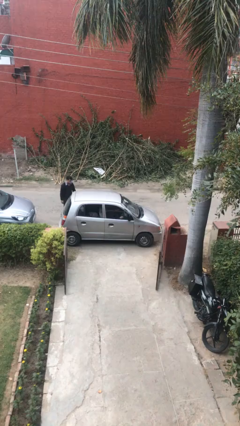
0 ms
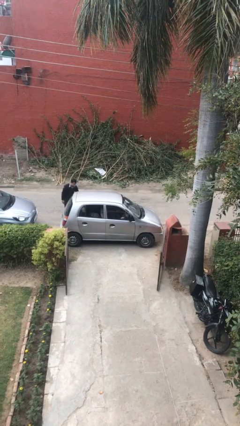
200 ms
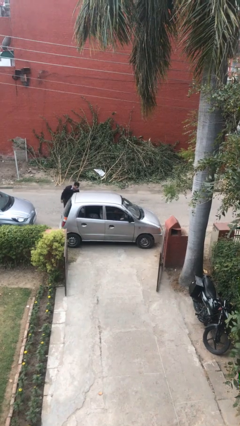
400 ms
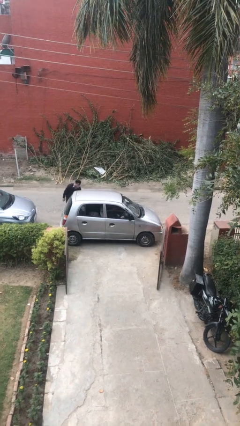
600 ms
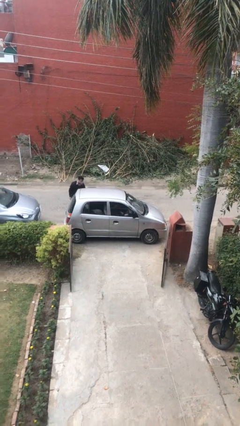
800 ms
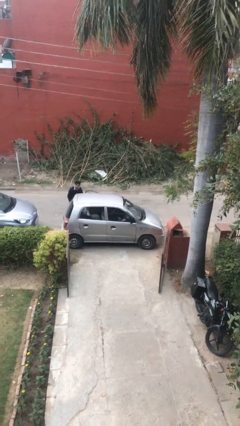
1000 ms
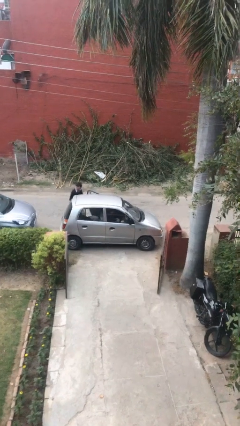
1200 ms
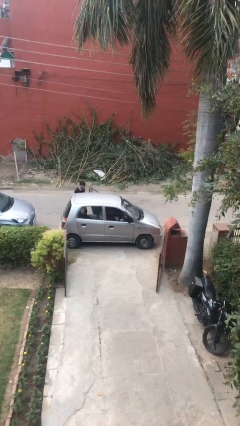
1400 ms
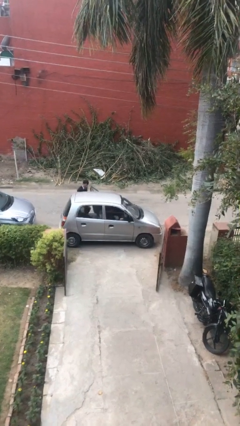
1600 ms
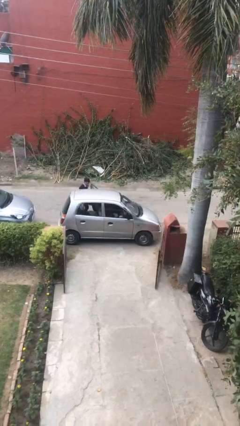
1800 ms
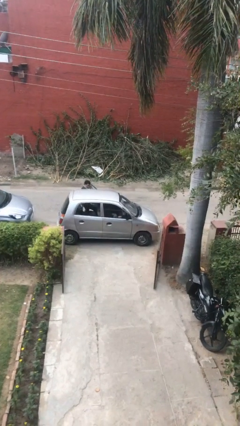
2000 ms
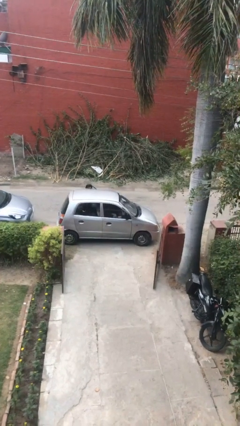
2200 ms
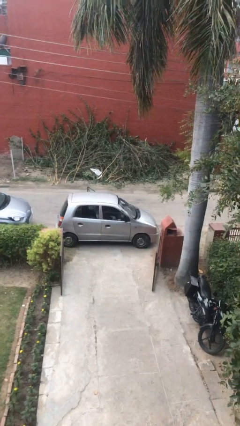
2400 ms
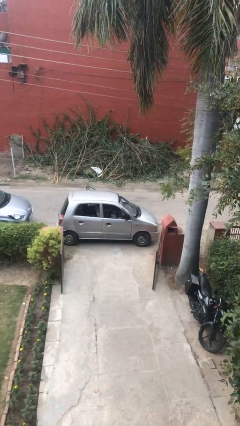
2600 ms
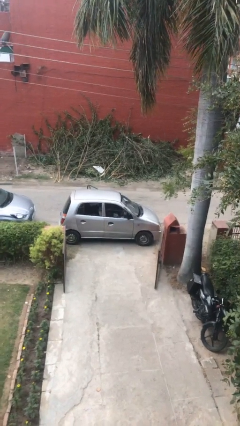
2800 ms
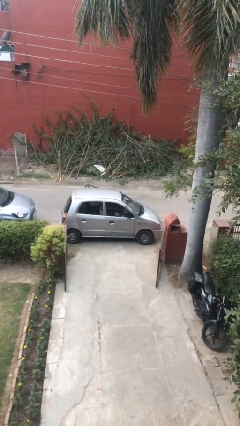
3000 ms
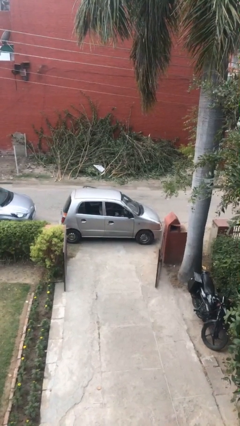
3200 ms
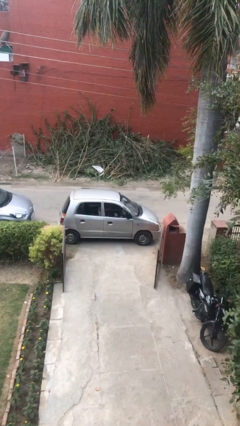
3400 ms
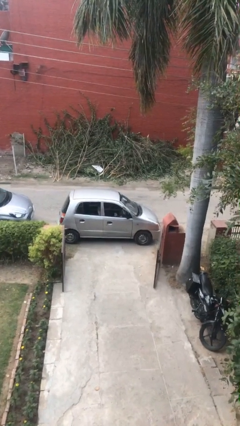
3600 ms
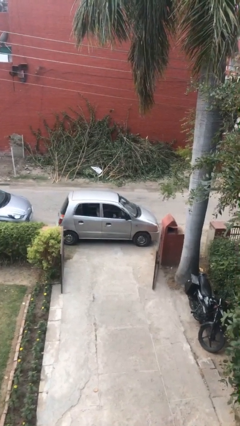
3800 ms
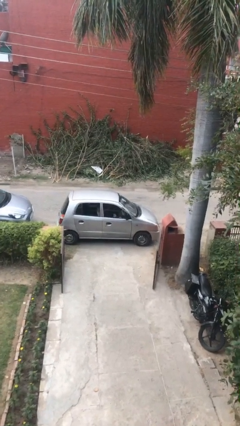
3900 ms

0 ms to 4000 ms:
car picks up person

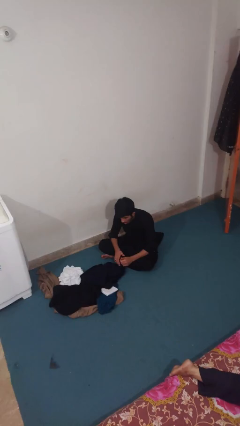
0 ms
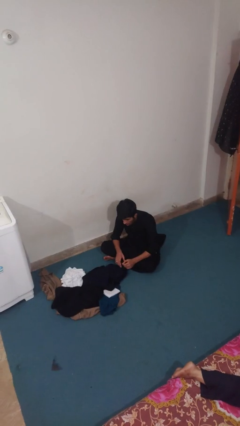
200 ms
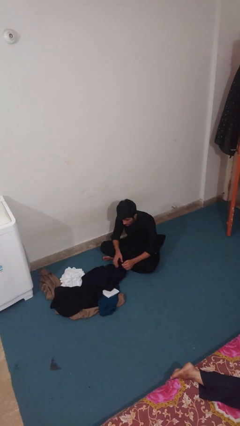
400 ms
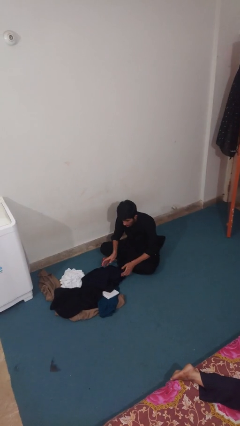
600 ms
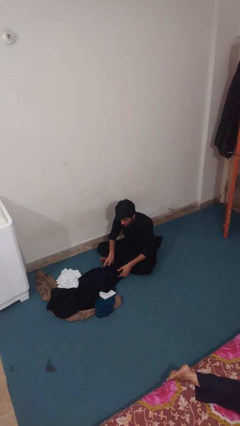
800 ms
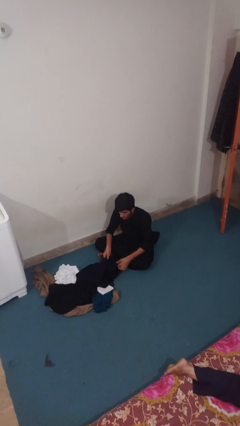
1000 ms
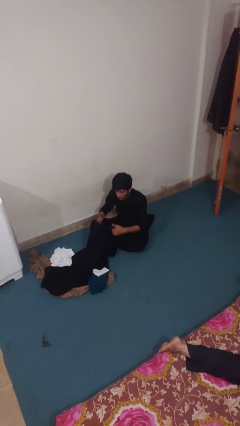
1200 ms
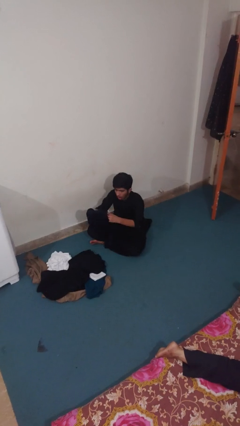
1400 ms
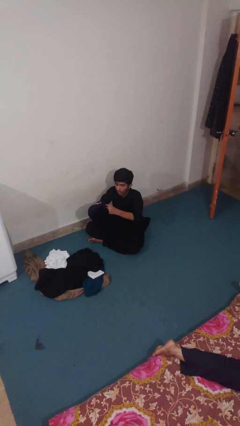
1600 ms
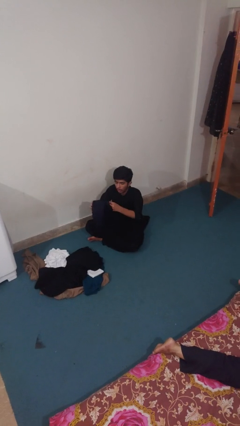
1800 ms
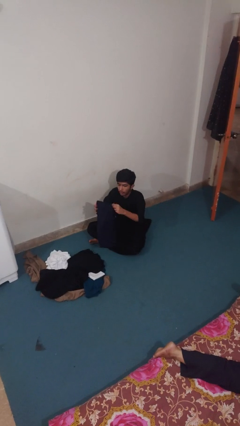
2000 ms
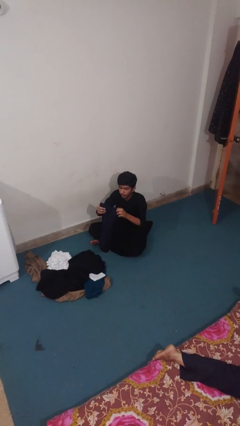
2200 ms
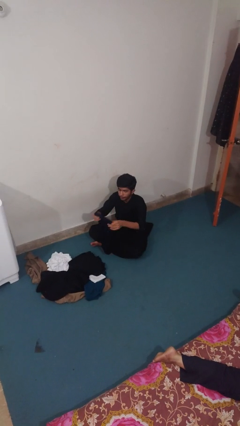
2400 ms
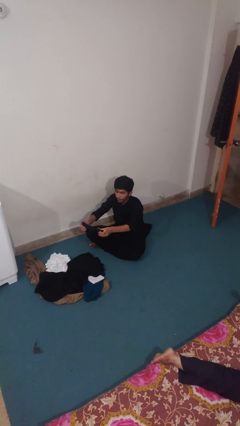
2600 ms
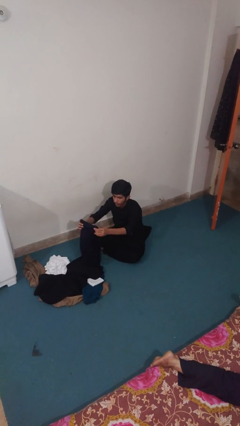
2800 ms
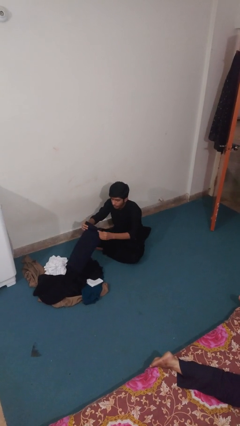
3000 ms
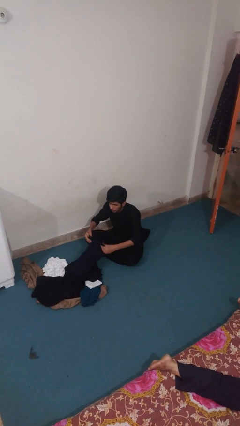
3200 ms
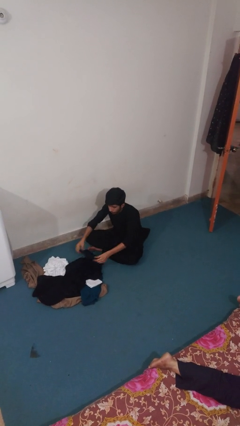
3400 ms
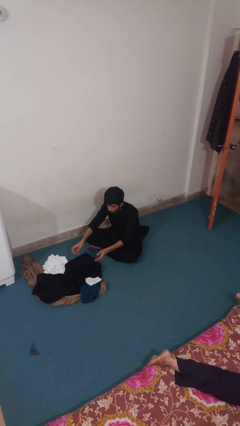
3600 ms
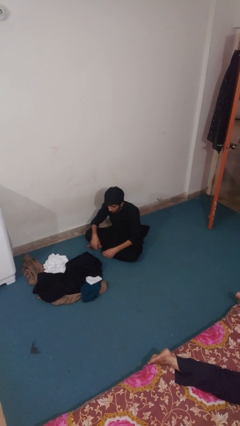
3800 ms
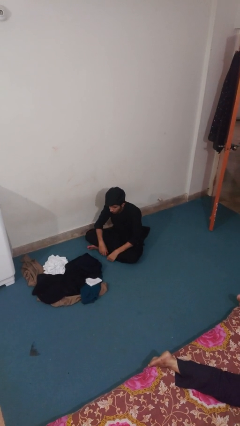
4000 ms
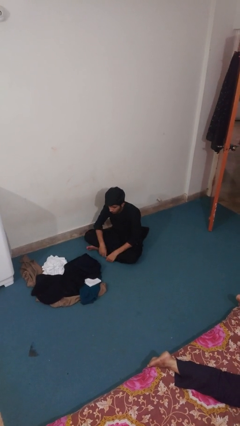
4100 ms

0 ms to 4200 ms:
person folds pants

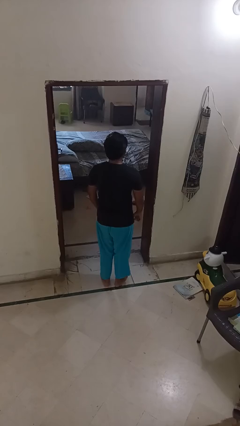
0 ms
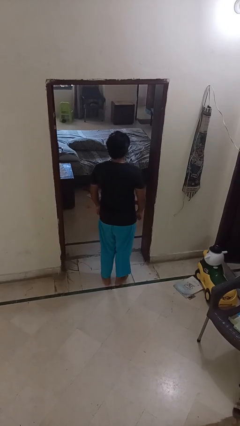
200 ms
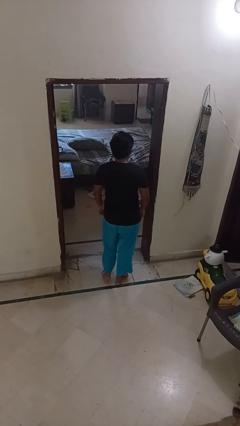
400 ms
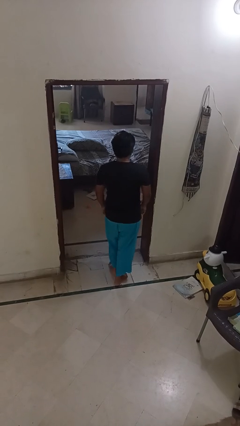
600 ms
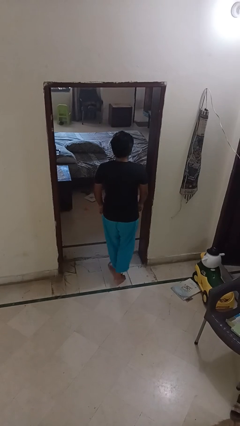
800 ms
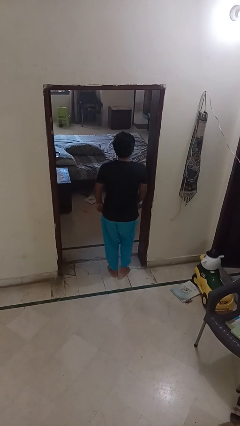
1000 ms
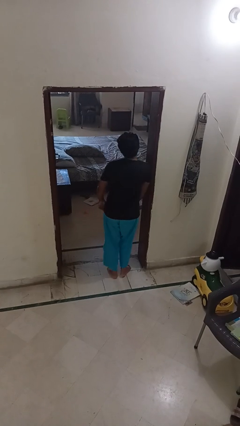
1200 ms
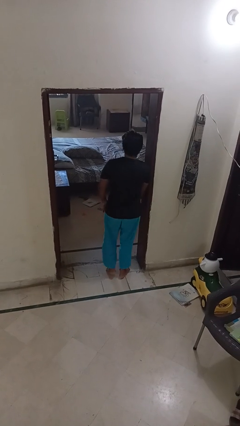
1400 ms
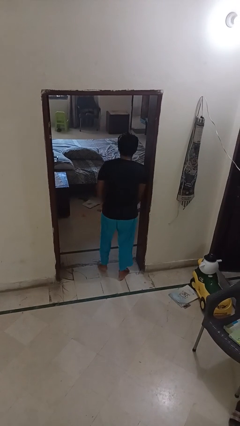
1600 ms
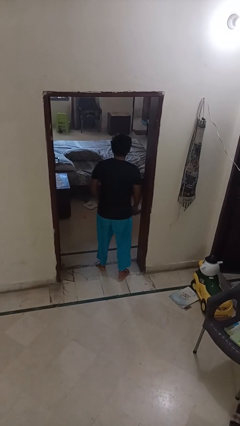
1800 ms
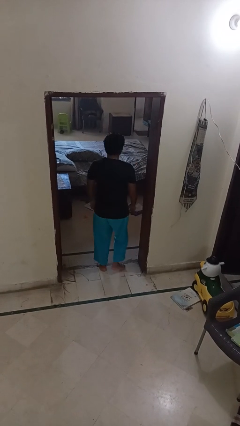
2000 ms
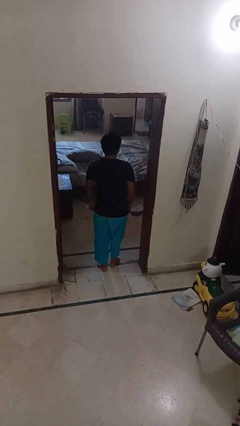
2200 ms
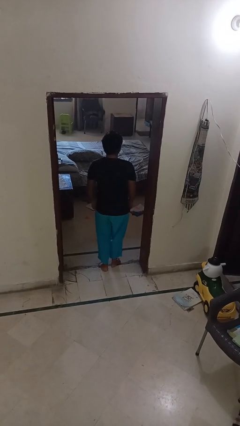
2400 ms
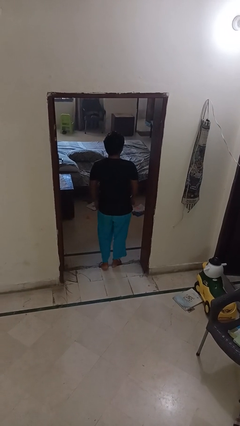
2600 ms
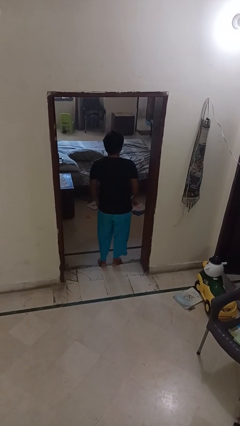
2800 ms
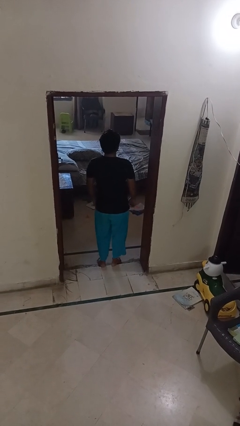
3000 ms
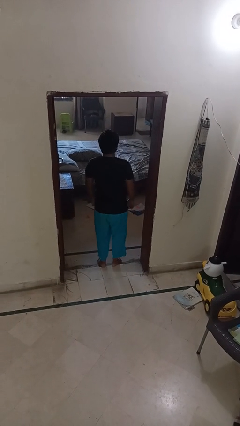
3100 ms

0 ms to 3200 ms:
person bumps into wall

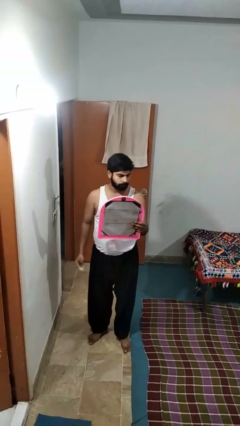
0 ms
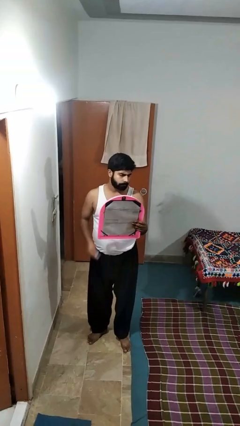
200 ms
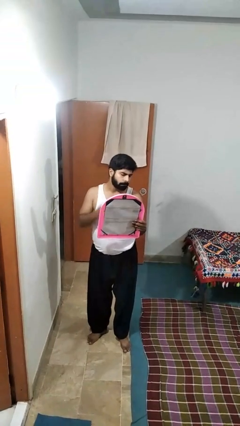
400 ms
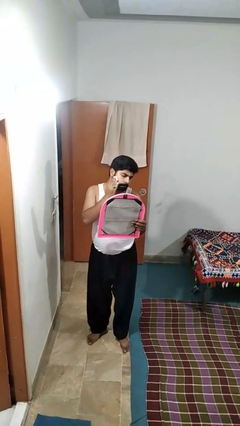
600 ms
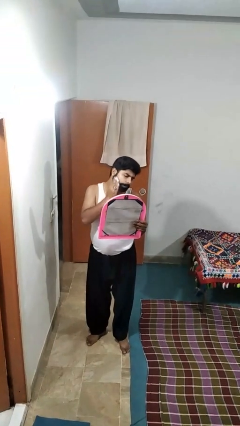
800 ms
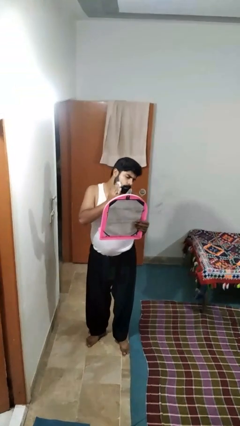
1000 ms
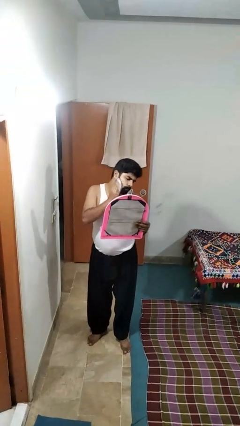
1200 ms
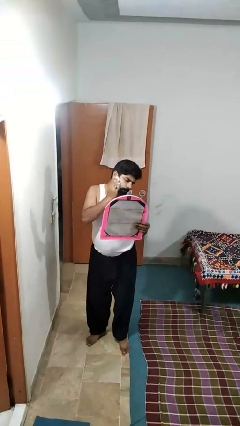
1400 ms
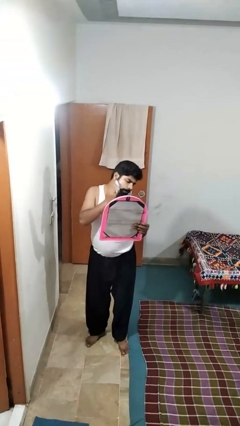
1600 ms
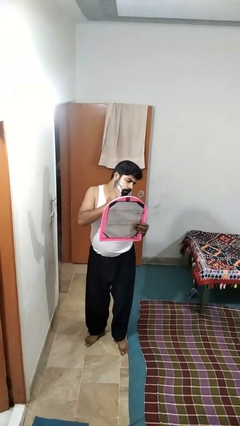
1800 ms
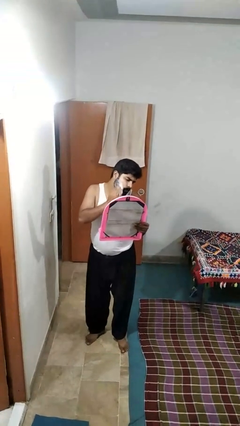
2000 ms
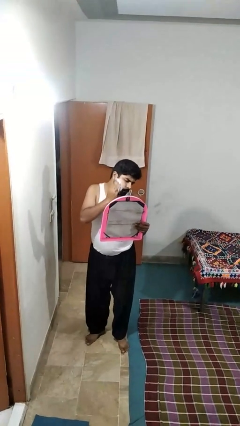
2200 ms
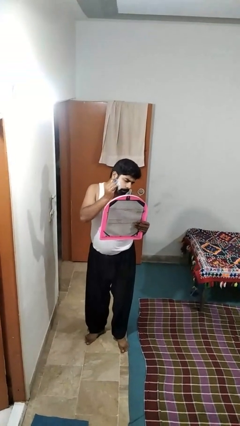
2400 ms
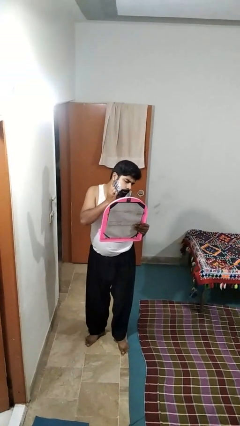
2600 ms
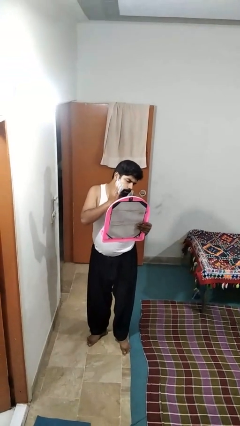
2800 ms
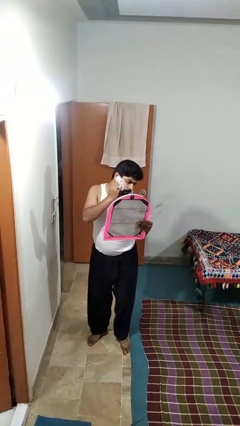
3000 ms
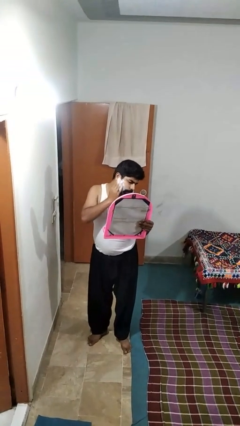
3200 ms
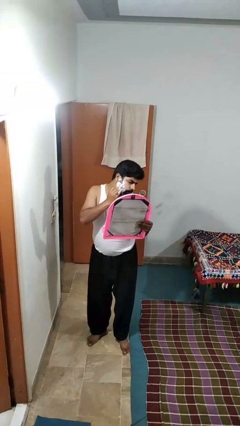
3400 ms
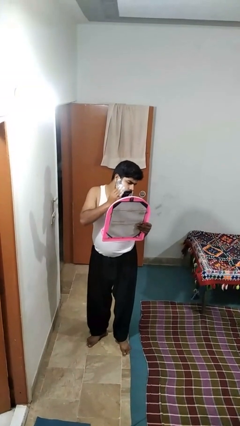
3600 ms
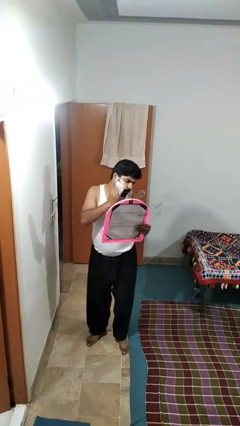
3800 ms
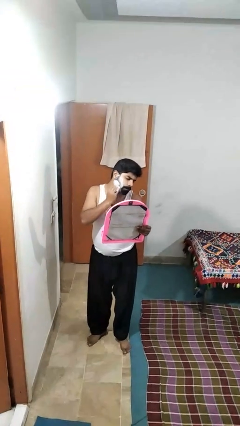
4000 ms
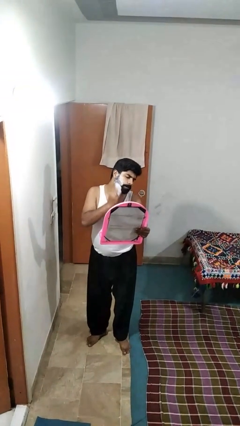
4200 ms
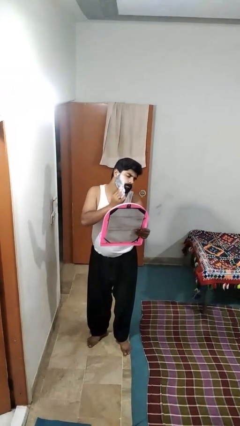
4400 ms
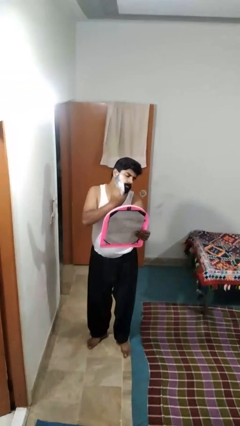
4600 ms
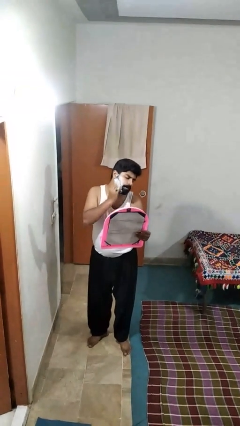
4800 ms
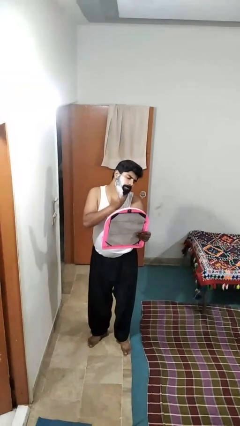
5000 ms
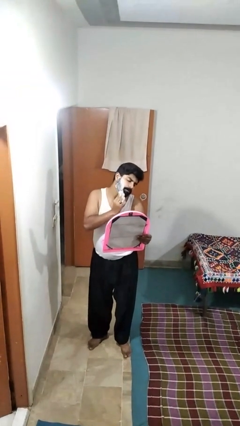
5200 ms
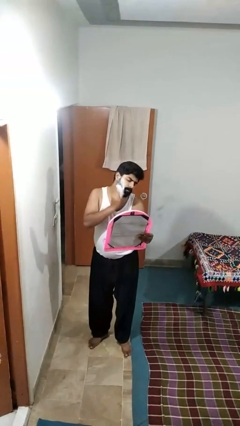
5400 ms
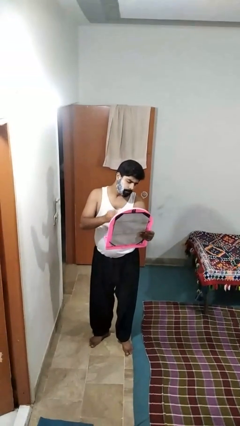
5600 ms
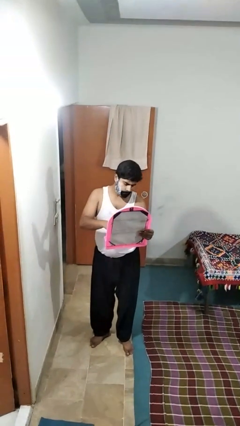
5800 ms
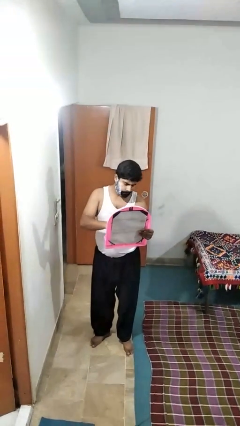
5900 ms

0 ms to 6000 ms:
person applies shaving cream

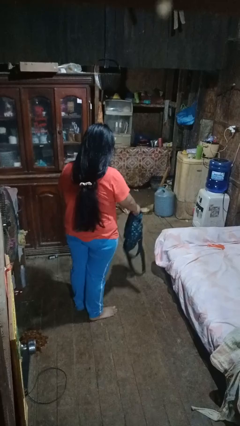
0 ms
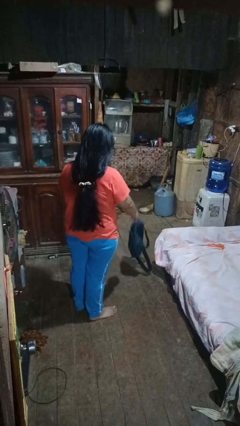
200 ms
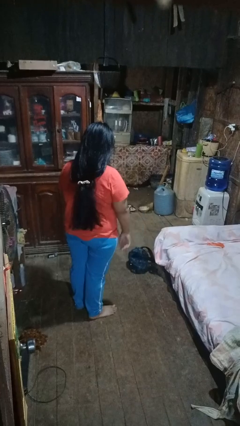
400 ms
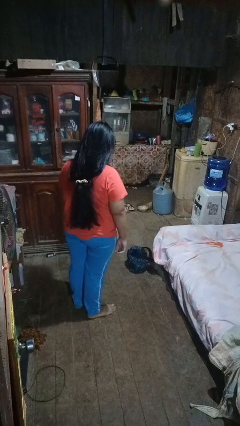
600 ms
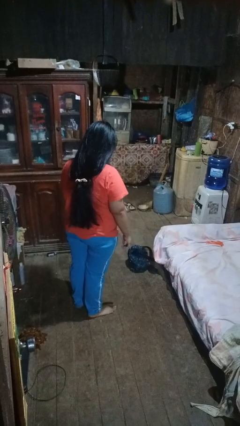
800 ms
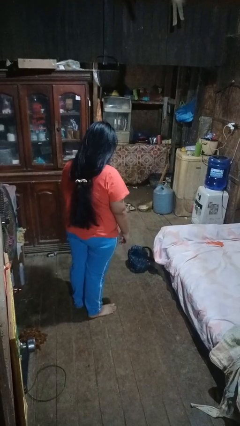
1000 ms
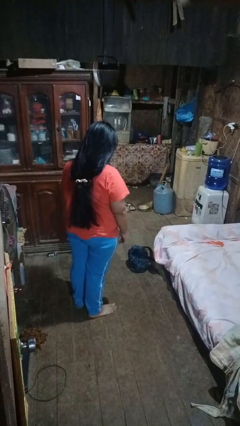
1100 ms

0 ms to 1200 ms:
person throws object to ground
